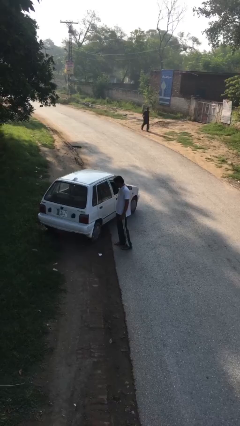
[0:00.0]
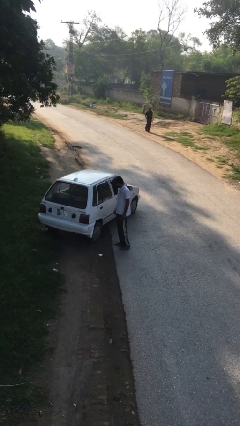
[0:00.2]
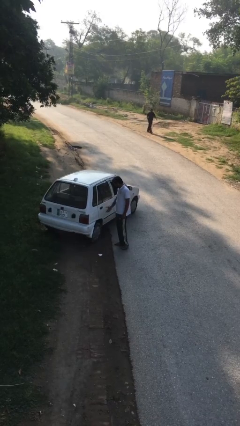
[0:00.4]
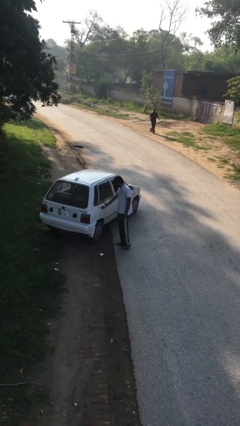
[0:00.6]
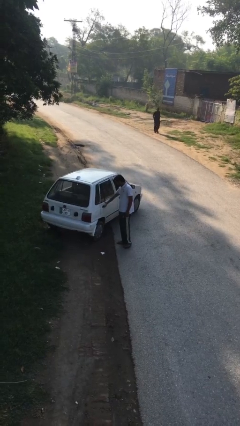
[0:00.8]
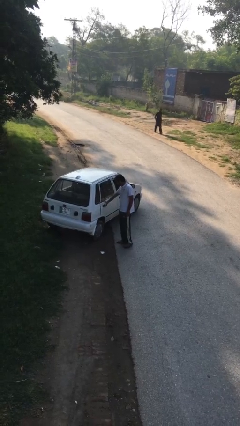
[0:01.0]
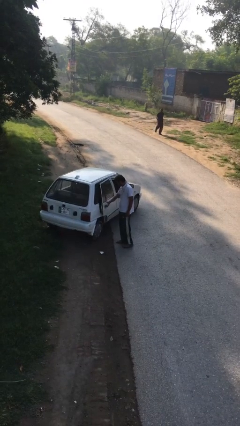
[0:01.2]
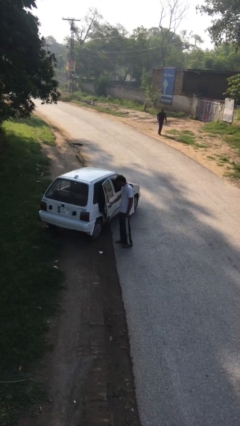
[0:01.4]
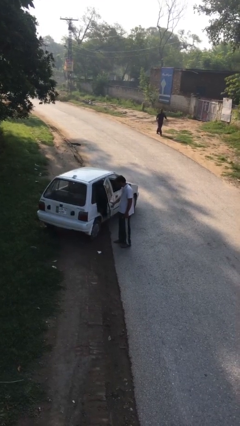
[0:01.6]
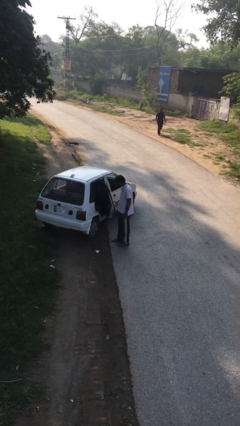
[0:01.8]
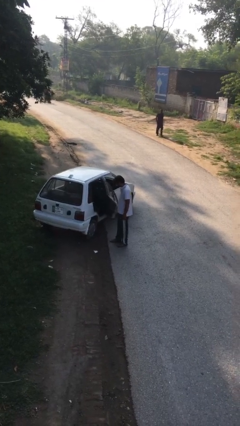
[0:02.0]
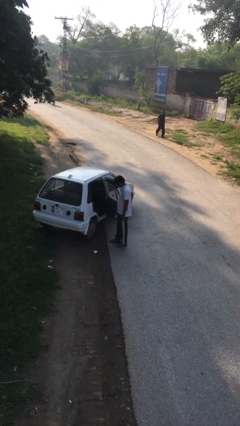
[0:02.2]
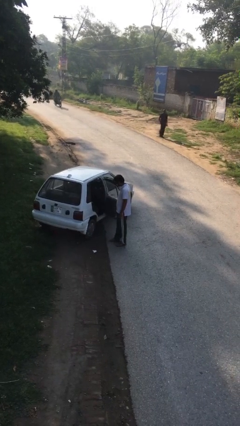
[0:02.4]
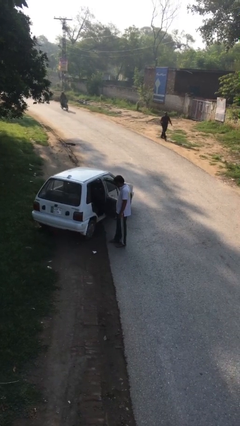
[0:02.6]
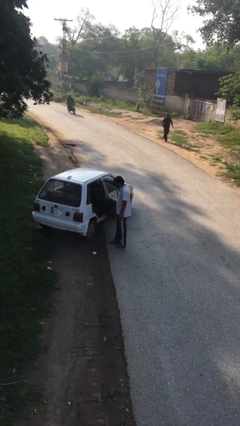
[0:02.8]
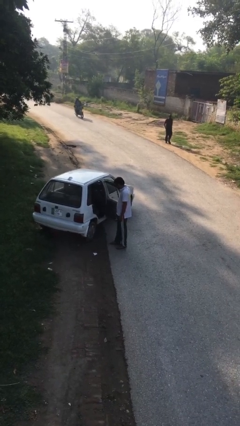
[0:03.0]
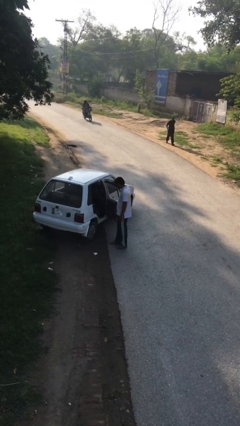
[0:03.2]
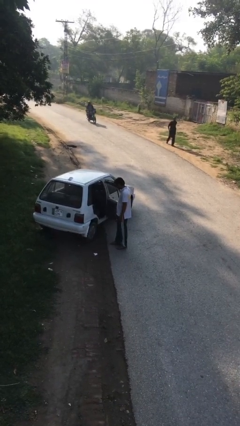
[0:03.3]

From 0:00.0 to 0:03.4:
person opens car door

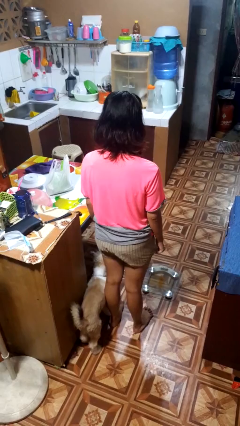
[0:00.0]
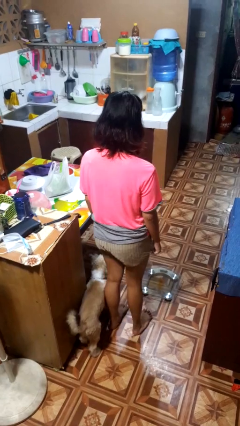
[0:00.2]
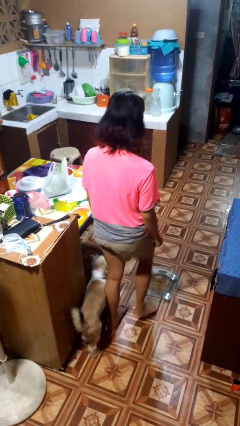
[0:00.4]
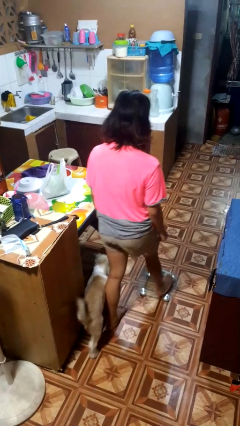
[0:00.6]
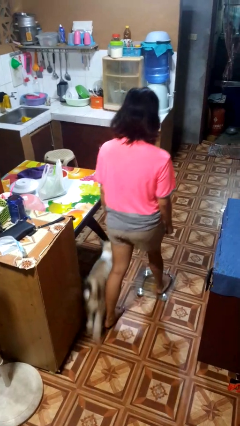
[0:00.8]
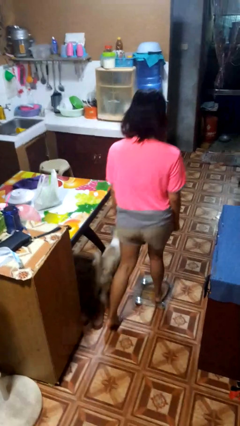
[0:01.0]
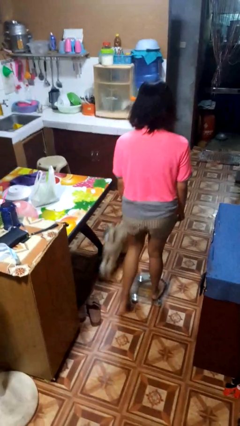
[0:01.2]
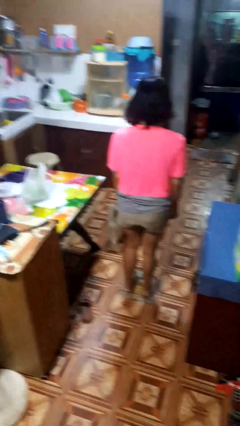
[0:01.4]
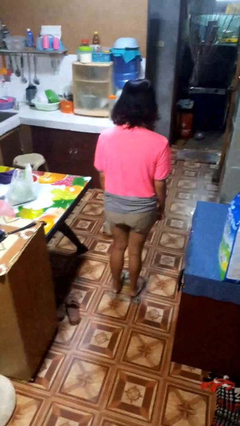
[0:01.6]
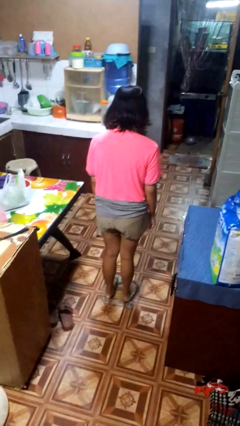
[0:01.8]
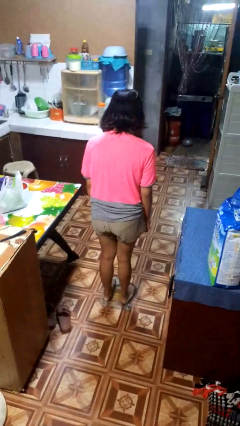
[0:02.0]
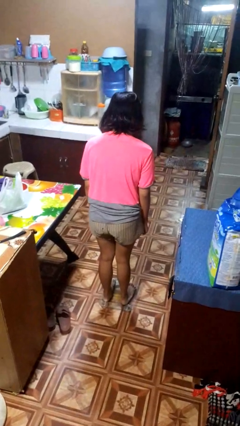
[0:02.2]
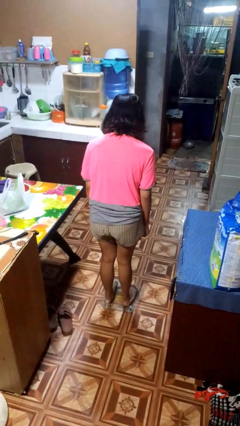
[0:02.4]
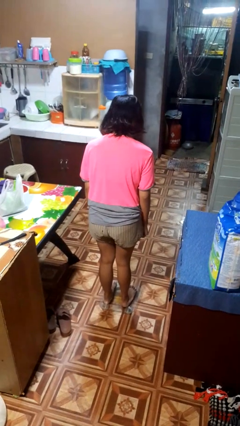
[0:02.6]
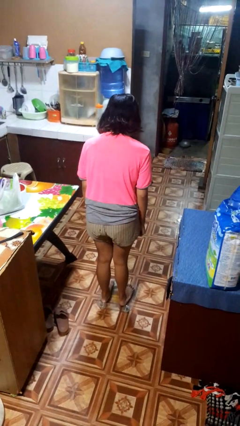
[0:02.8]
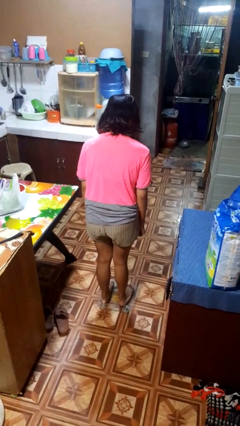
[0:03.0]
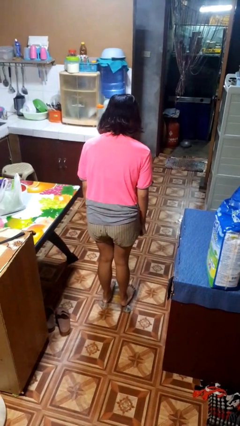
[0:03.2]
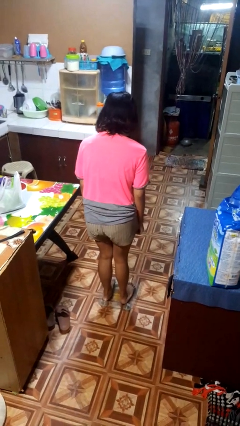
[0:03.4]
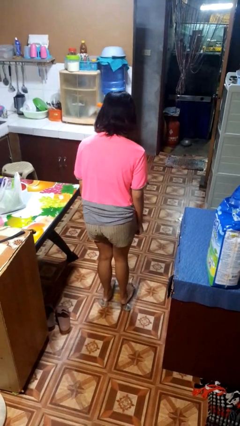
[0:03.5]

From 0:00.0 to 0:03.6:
person uses bodyweight scale

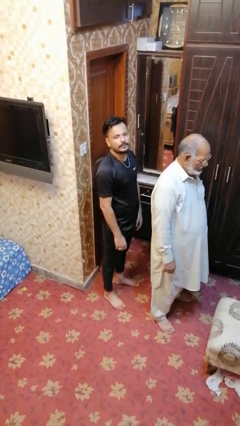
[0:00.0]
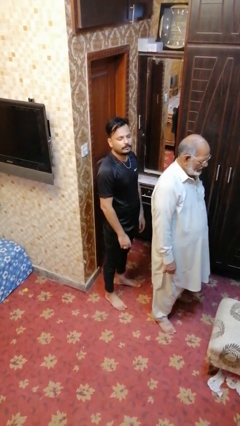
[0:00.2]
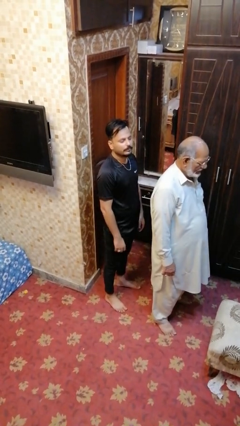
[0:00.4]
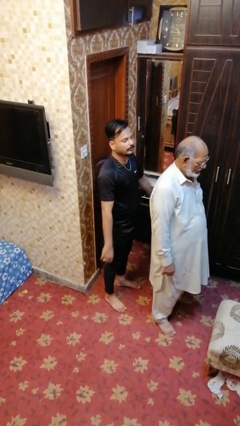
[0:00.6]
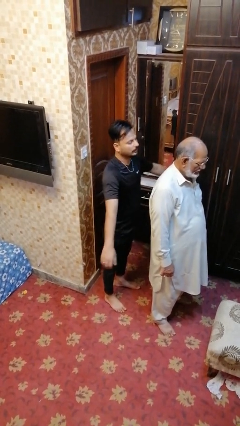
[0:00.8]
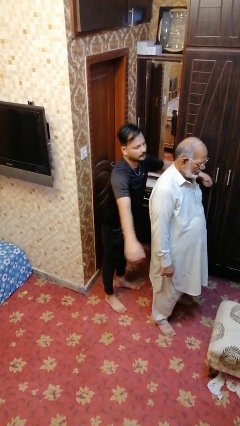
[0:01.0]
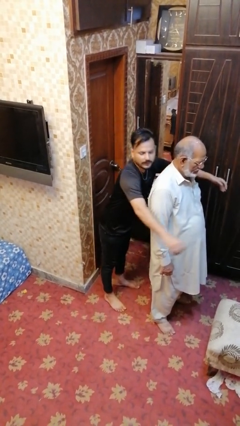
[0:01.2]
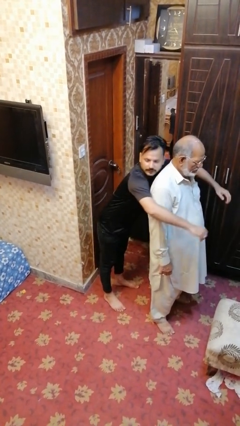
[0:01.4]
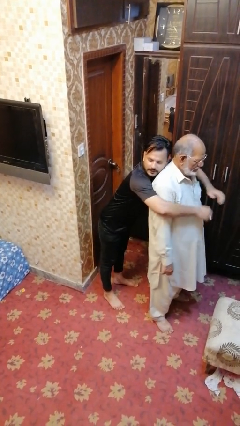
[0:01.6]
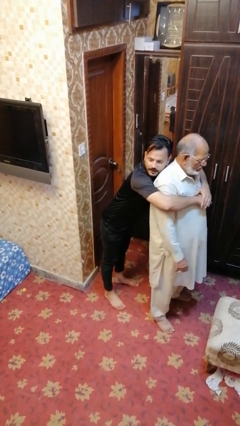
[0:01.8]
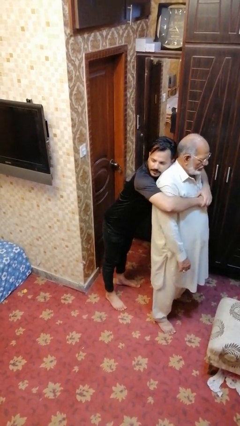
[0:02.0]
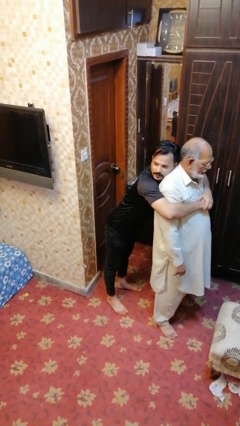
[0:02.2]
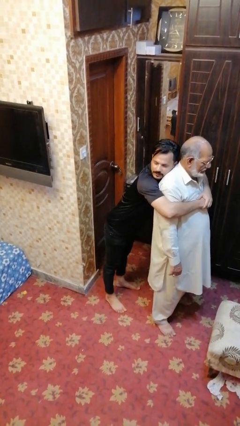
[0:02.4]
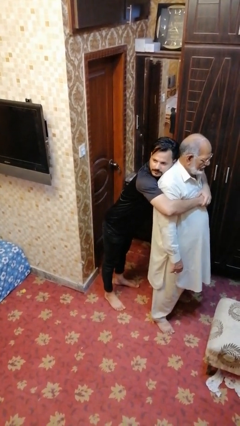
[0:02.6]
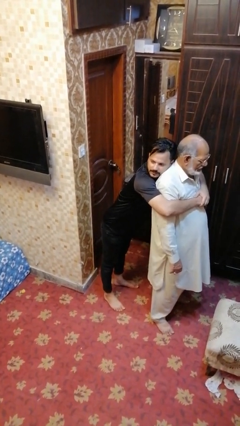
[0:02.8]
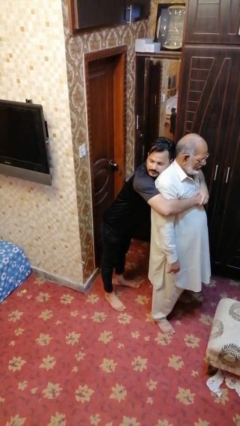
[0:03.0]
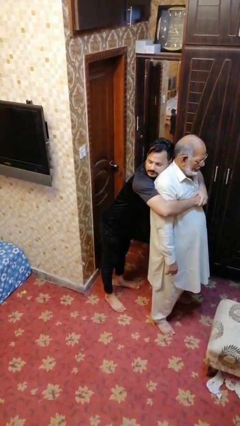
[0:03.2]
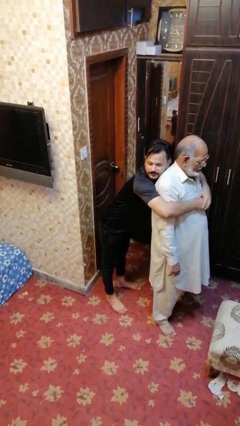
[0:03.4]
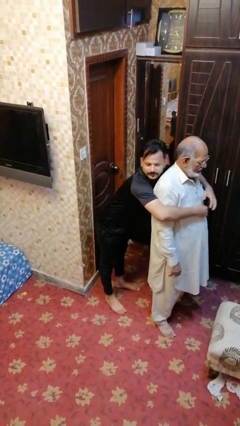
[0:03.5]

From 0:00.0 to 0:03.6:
person hugs person from behind

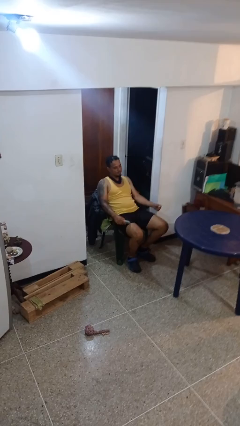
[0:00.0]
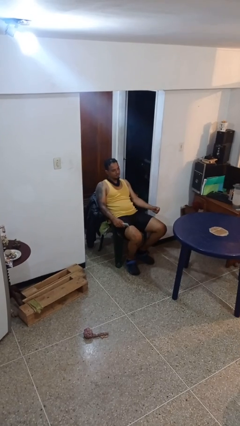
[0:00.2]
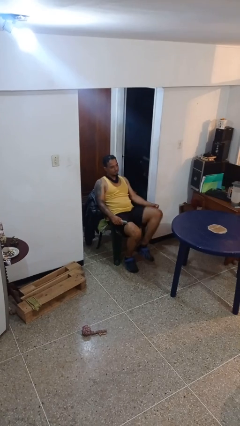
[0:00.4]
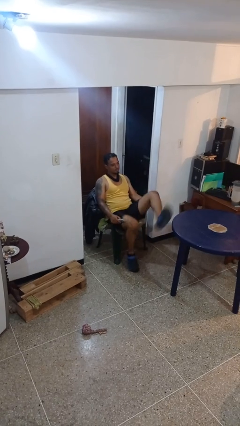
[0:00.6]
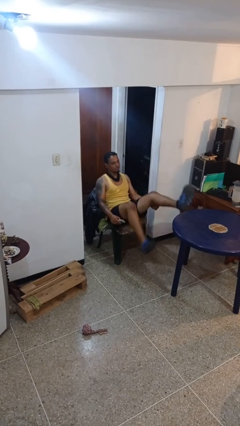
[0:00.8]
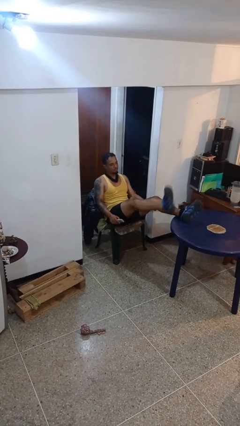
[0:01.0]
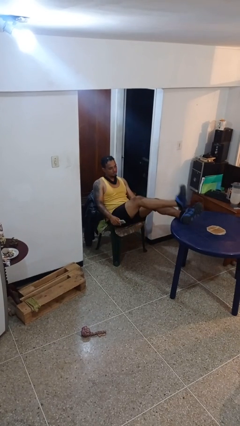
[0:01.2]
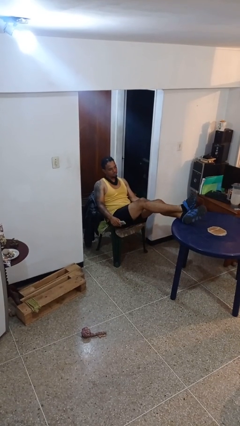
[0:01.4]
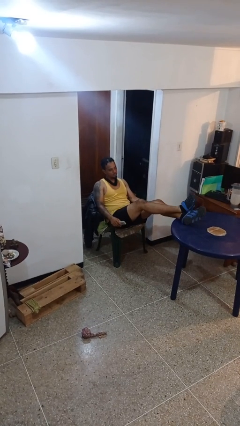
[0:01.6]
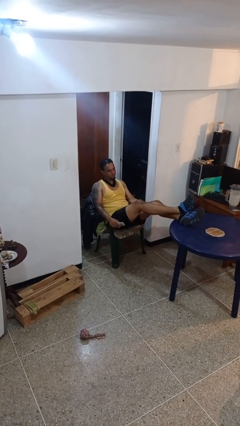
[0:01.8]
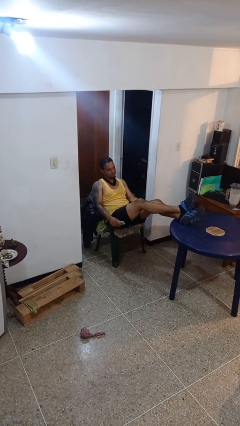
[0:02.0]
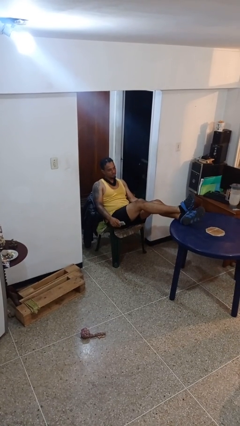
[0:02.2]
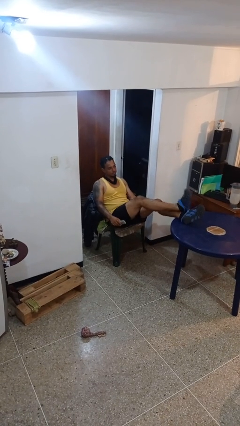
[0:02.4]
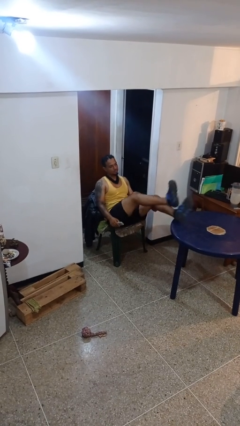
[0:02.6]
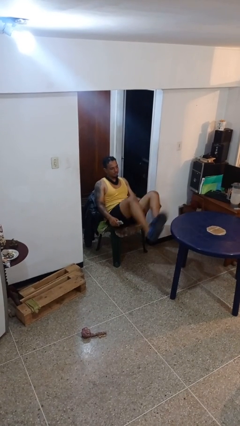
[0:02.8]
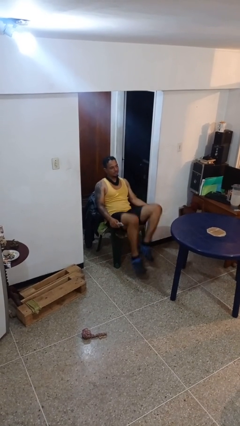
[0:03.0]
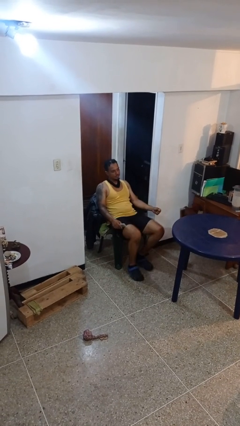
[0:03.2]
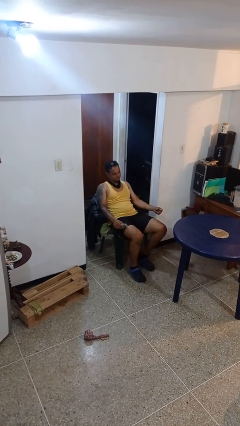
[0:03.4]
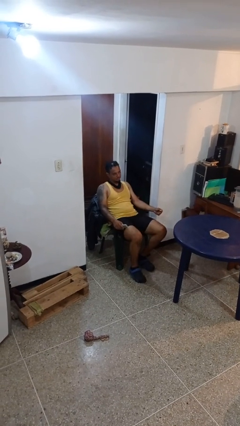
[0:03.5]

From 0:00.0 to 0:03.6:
person puts feet up

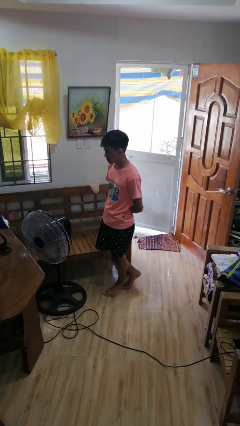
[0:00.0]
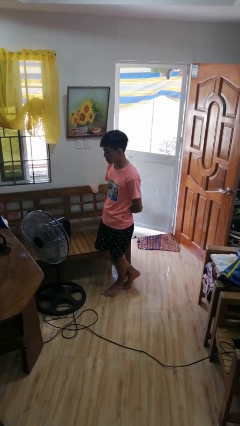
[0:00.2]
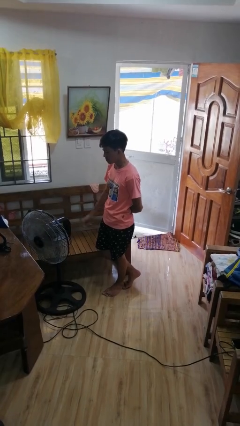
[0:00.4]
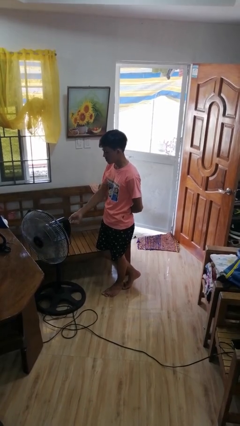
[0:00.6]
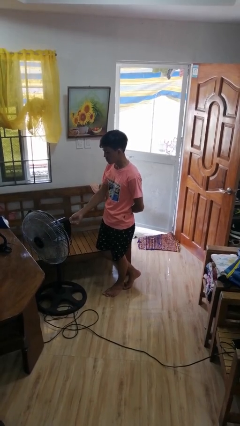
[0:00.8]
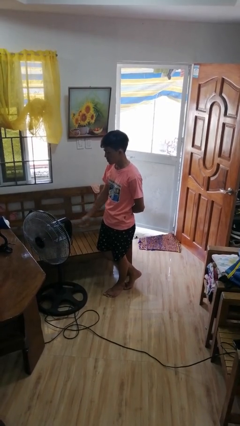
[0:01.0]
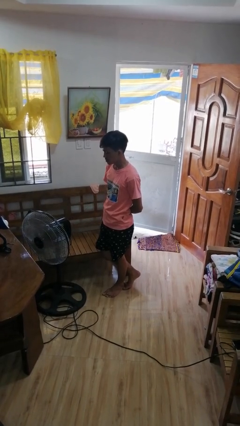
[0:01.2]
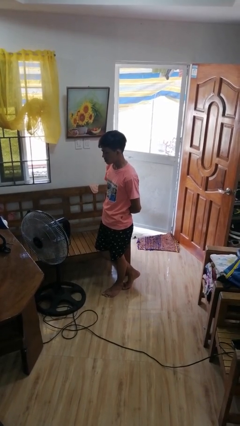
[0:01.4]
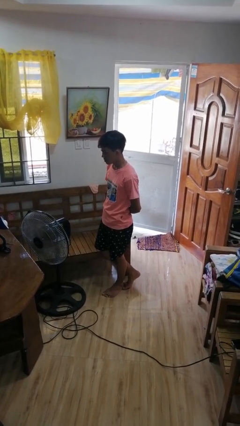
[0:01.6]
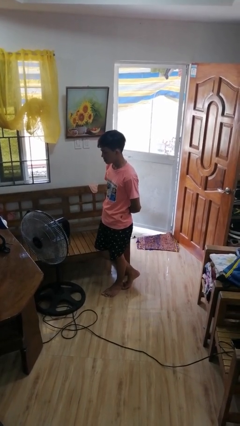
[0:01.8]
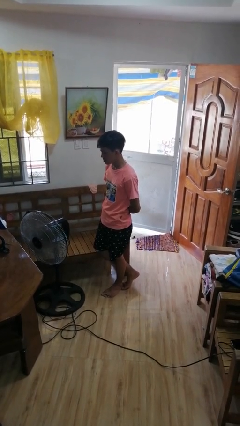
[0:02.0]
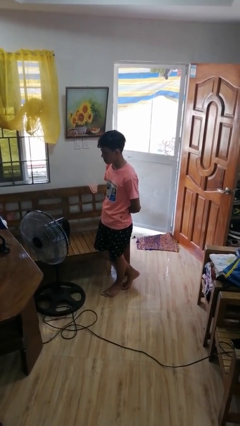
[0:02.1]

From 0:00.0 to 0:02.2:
person turns on fan

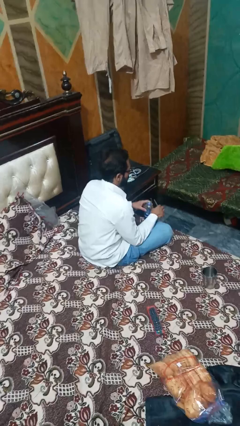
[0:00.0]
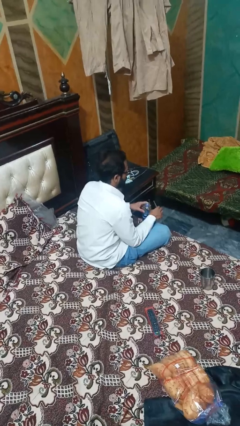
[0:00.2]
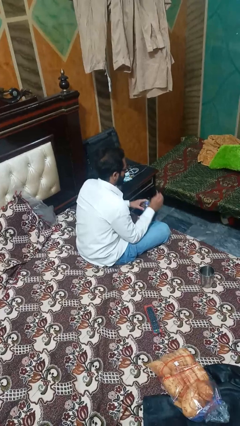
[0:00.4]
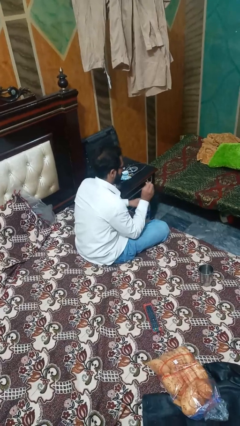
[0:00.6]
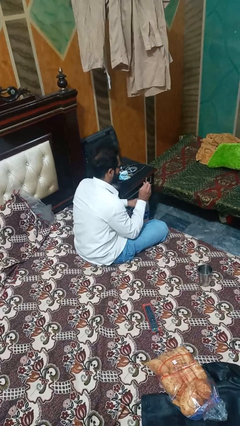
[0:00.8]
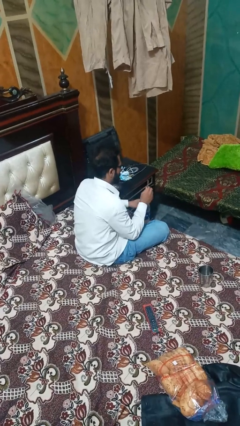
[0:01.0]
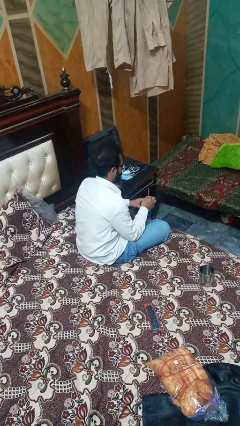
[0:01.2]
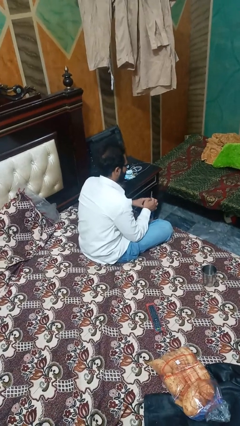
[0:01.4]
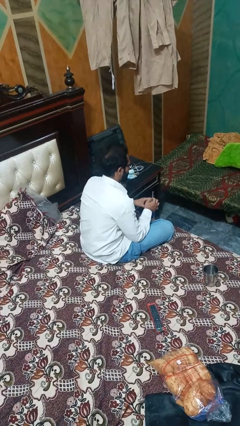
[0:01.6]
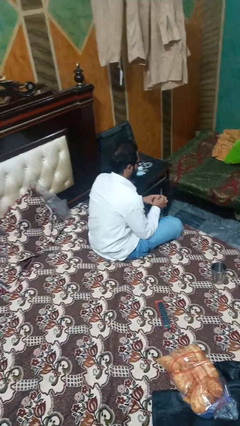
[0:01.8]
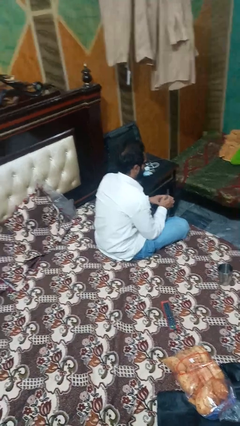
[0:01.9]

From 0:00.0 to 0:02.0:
person screws lid to bottle
